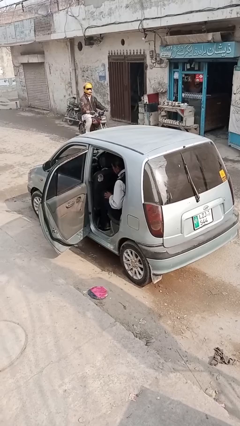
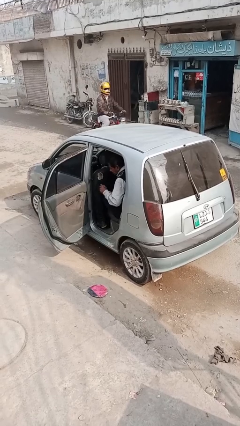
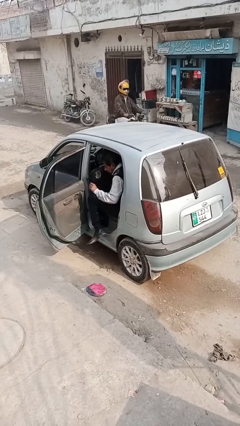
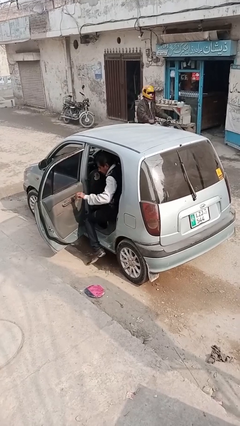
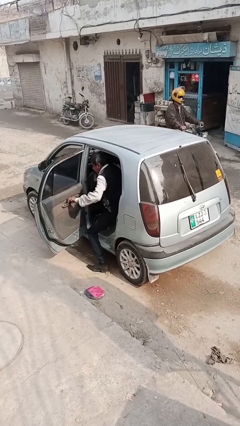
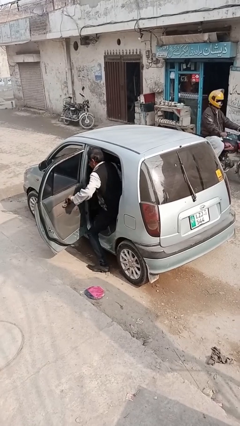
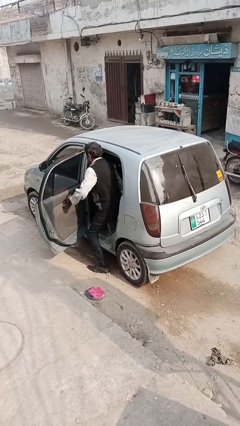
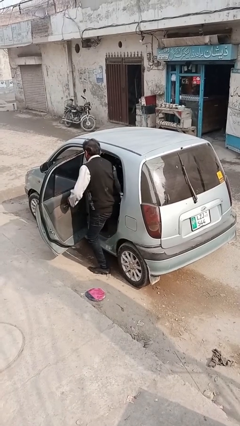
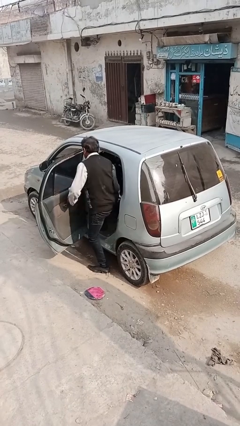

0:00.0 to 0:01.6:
person exits car

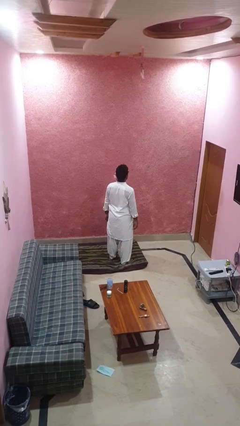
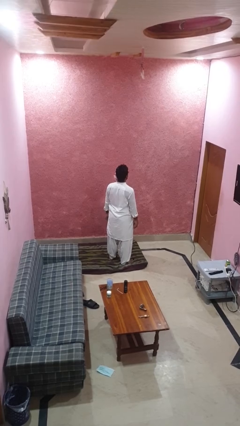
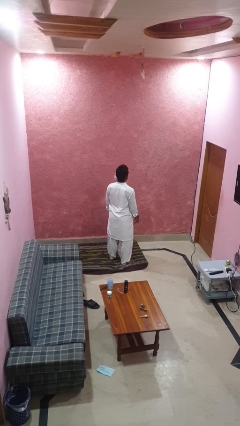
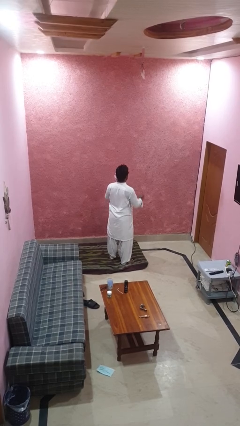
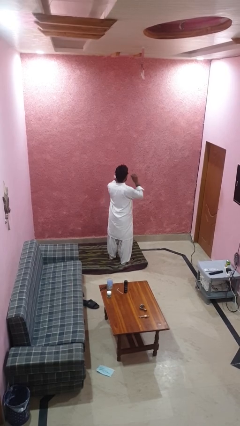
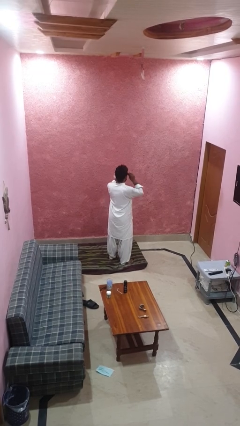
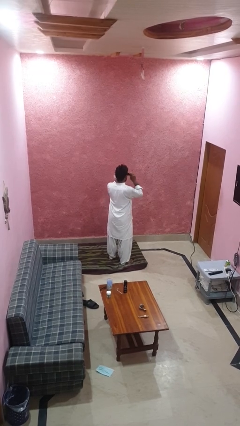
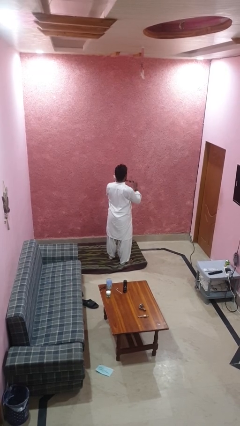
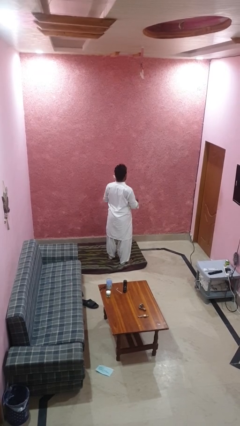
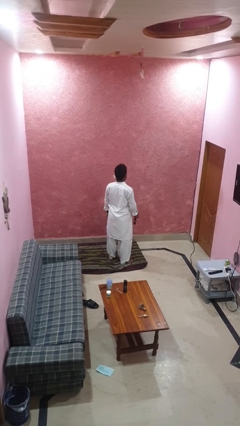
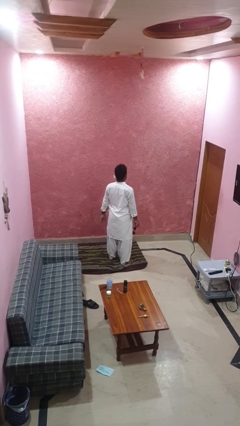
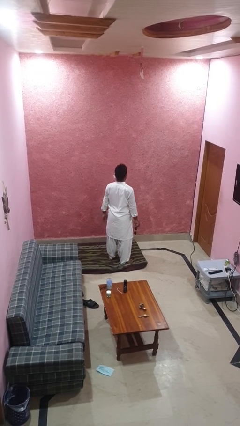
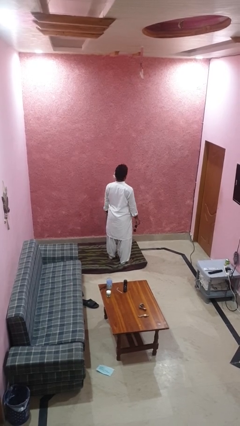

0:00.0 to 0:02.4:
person takes off sunglasses

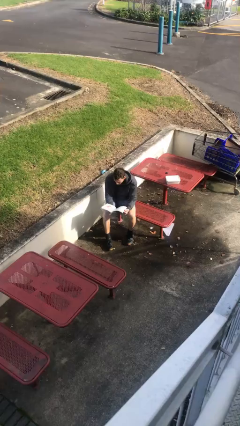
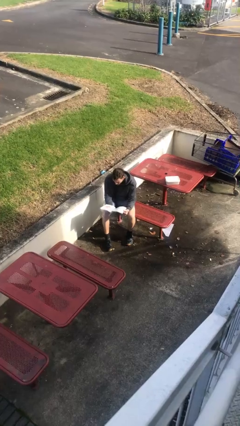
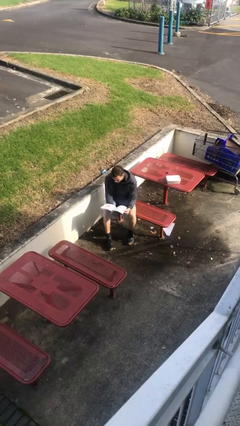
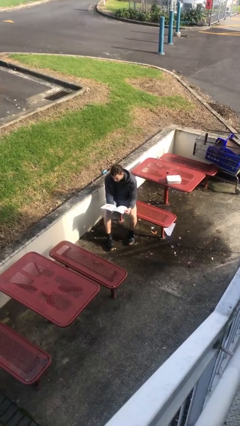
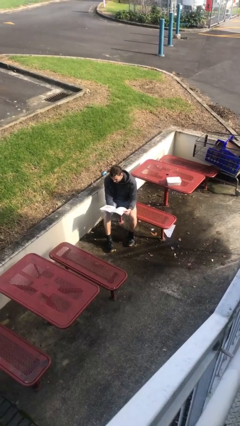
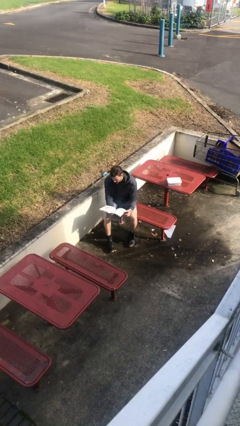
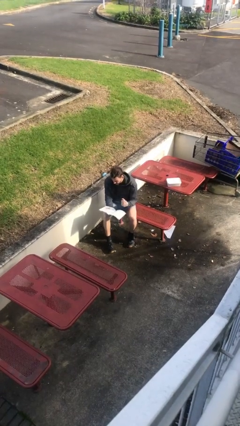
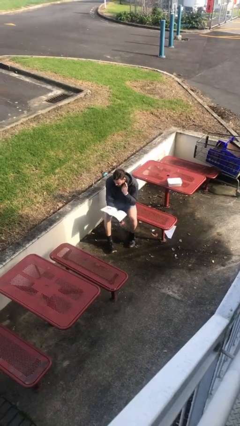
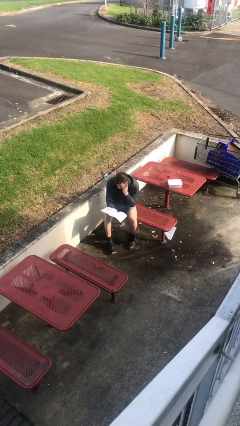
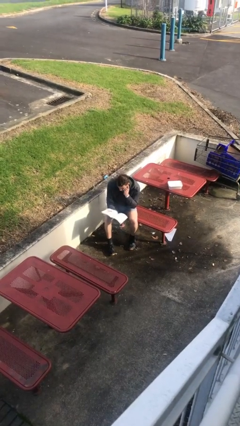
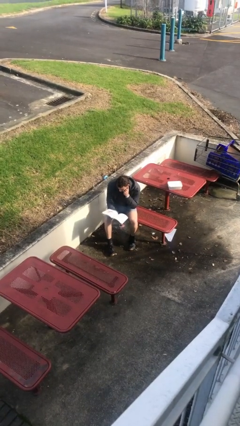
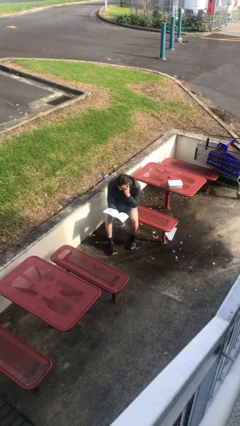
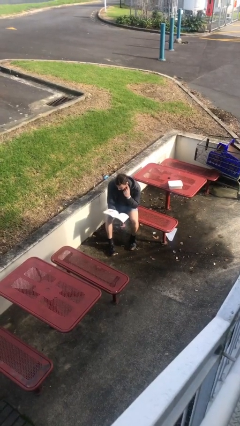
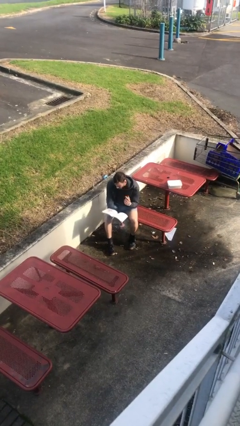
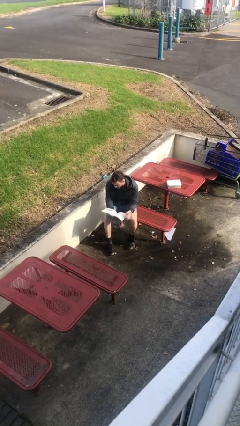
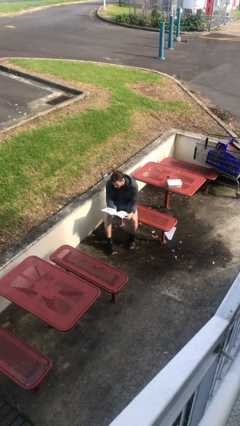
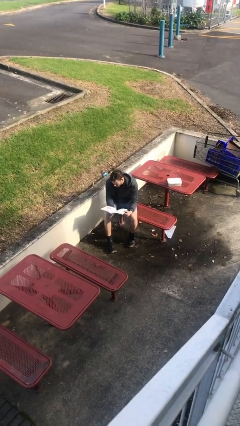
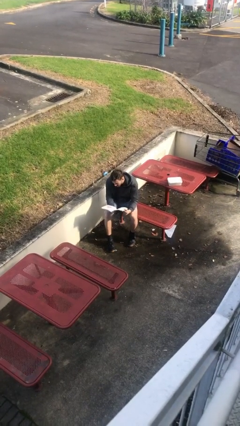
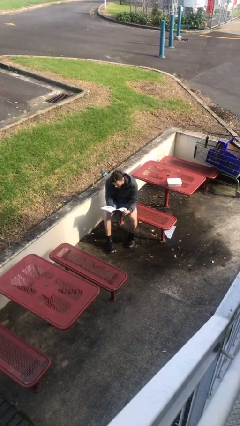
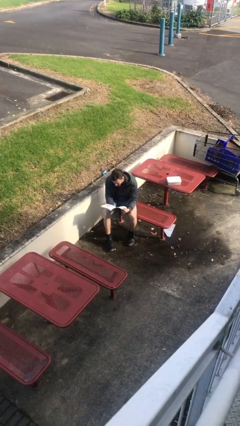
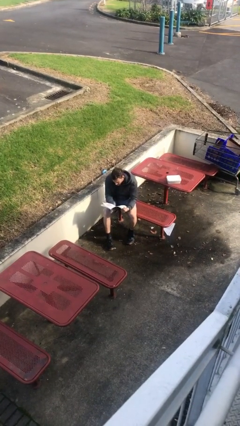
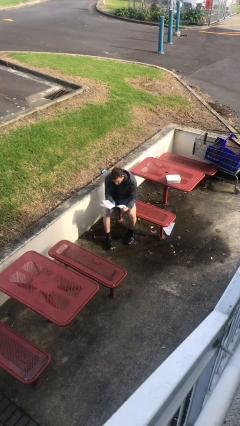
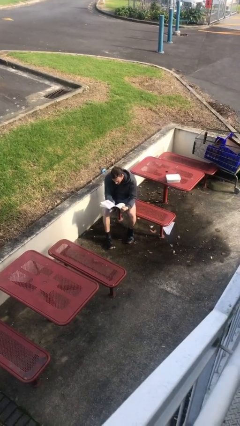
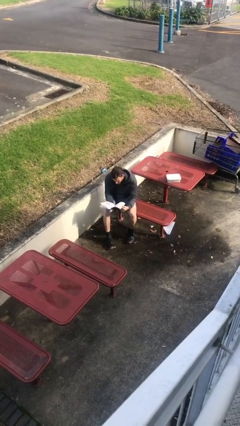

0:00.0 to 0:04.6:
person reads document

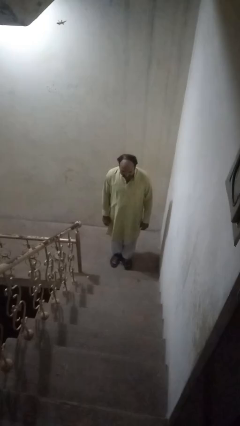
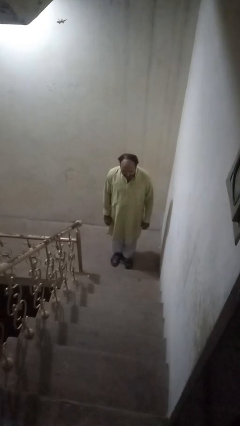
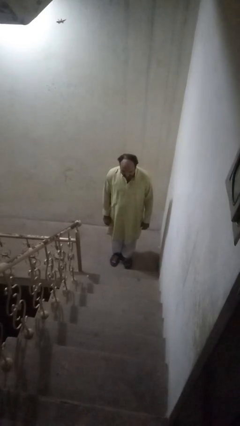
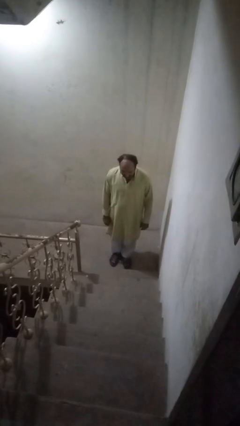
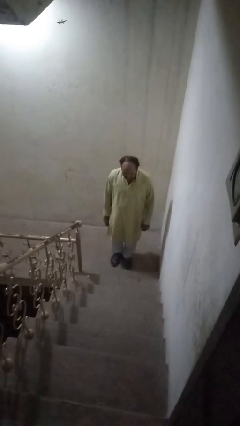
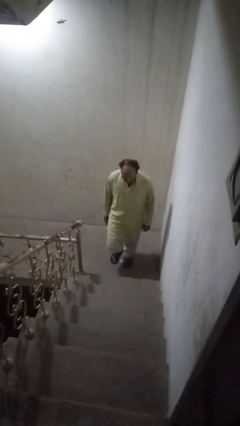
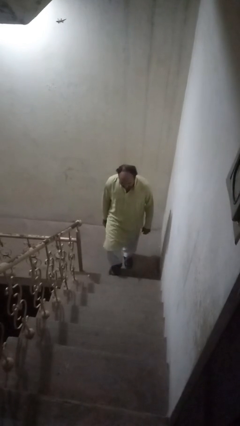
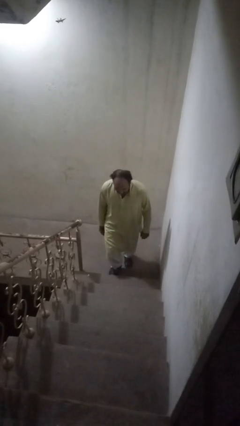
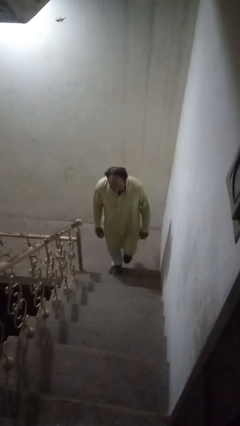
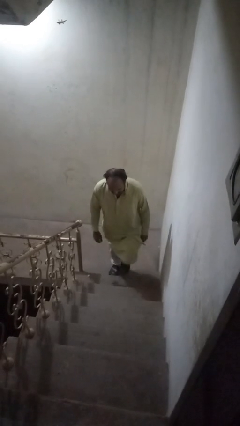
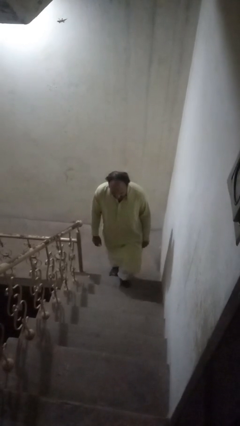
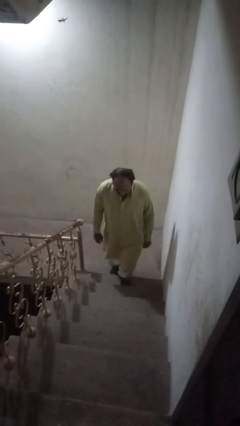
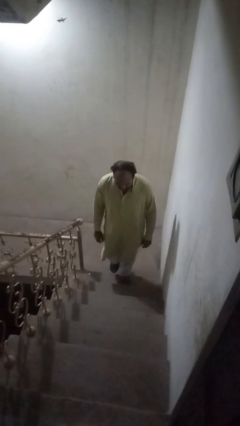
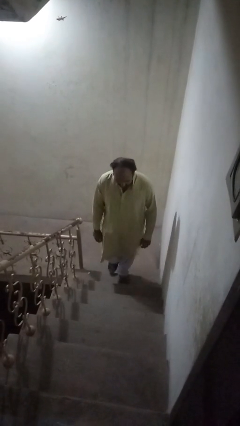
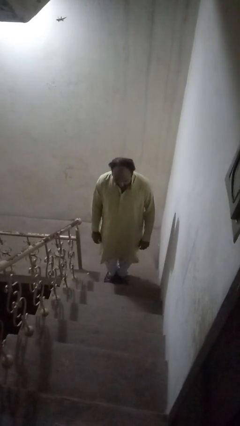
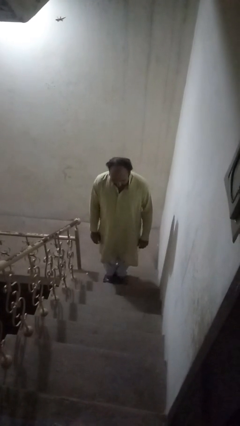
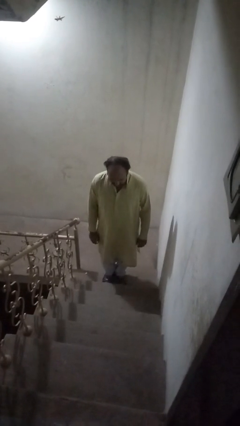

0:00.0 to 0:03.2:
person climbs up ladder

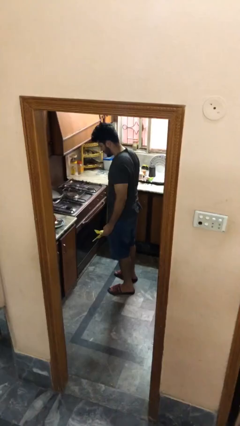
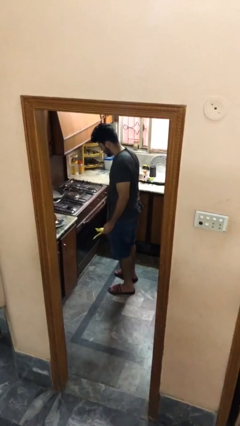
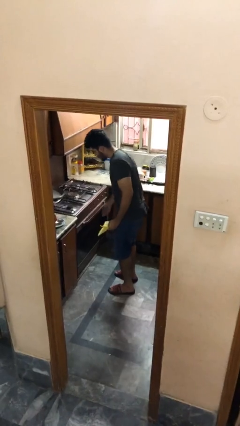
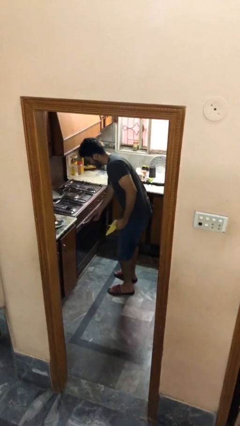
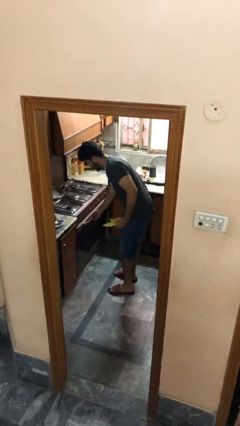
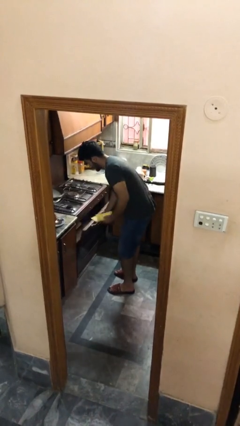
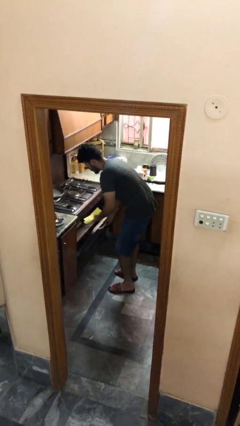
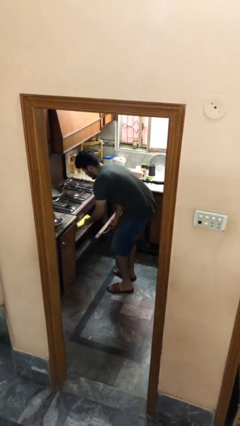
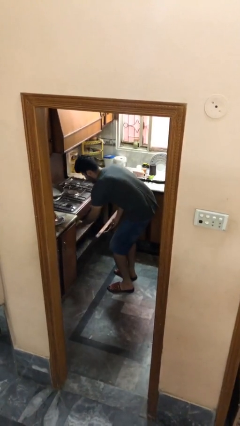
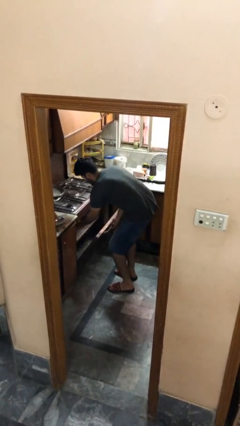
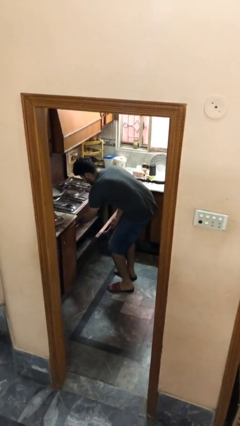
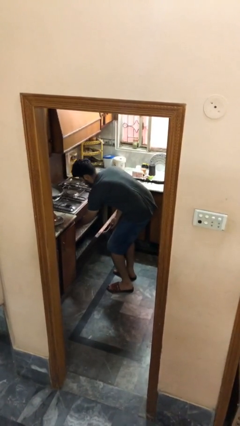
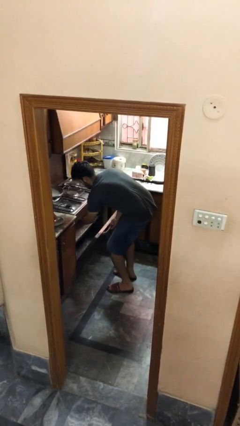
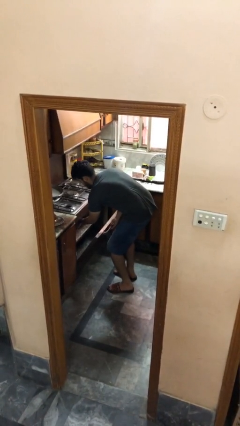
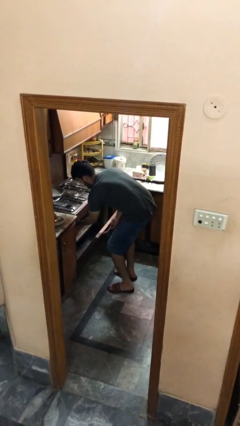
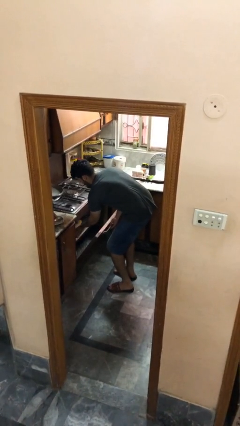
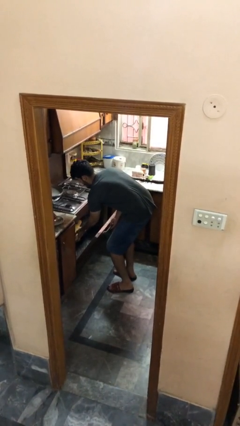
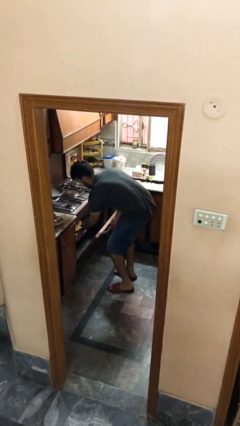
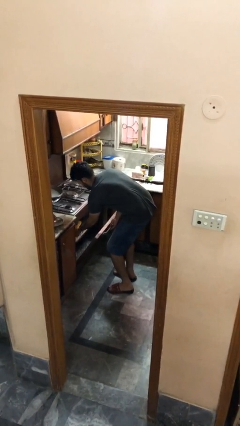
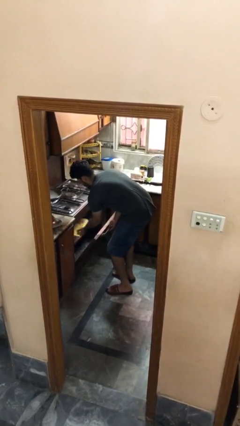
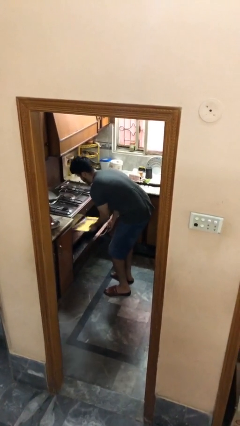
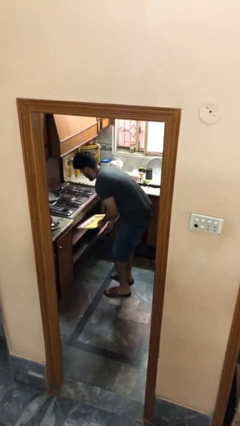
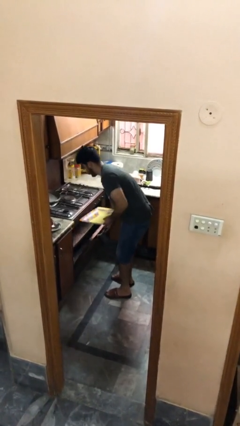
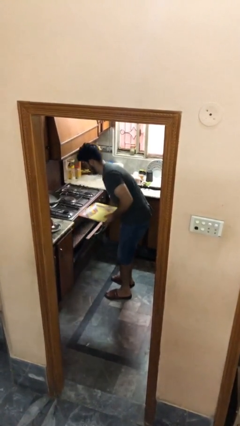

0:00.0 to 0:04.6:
person takes object from oven

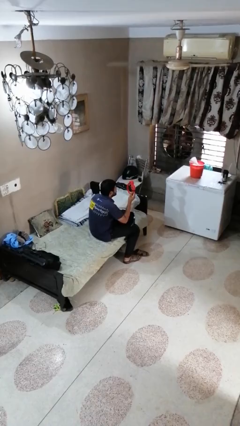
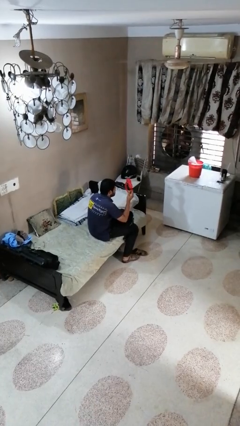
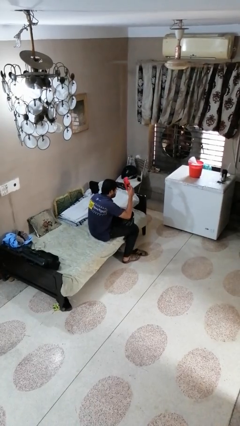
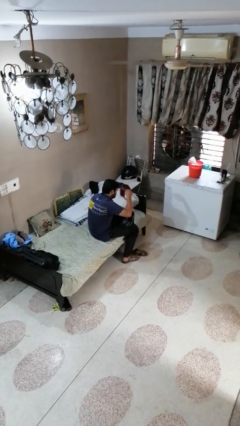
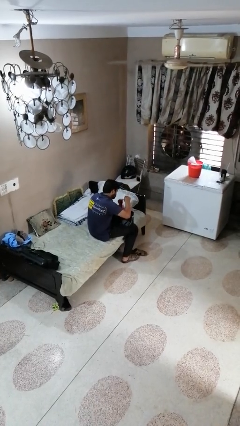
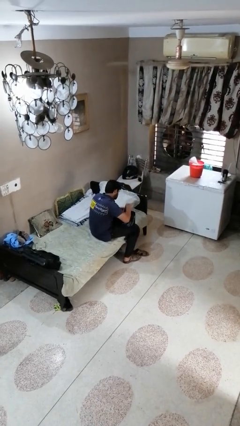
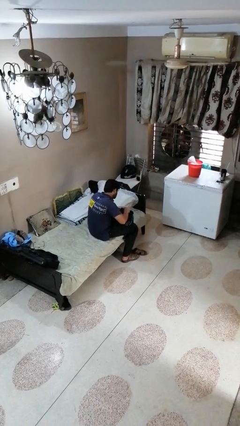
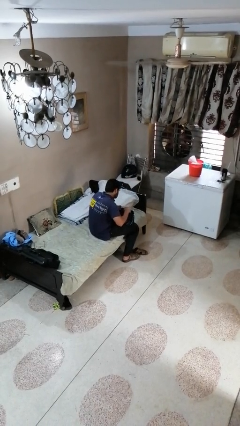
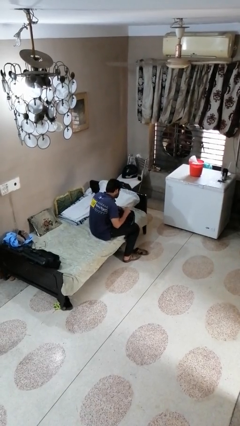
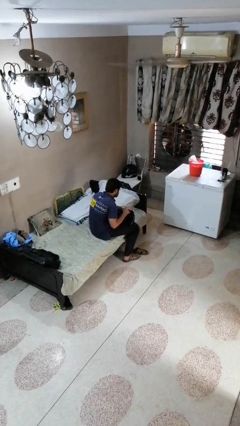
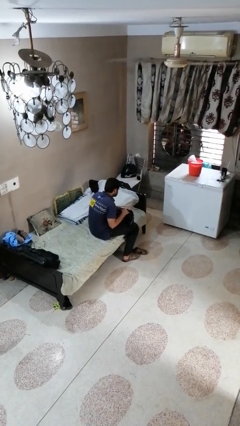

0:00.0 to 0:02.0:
person puts object into purse
